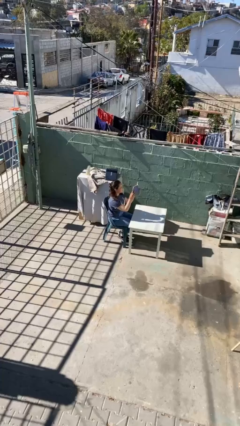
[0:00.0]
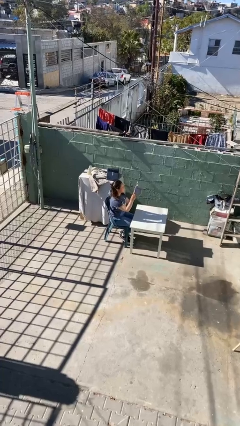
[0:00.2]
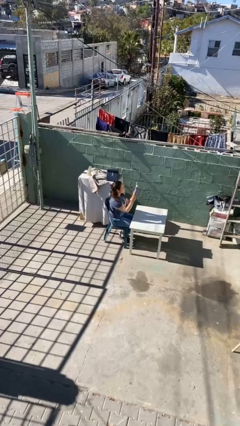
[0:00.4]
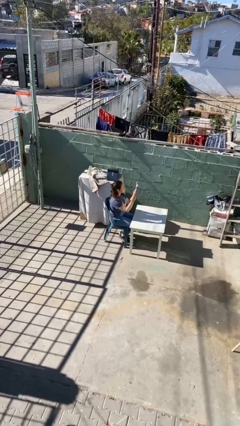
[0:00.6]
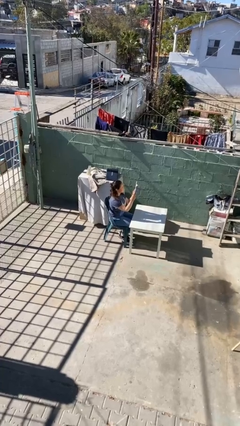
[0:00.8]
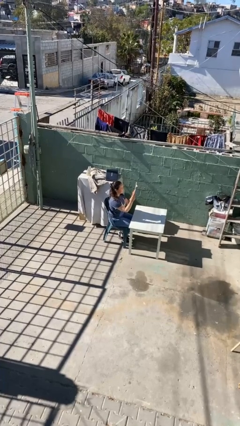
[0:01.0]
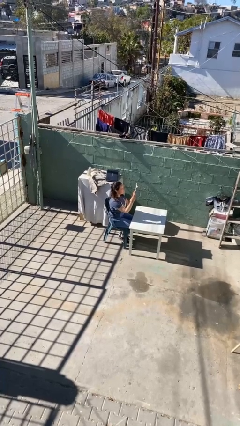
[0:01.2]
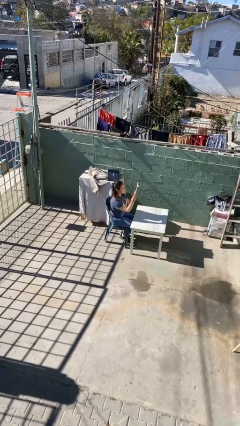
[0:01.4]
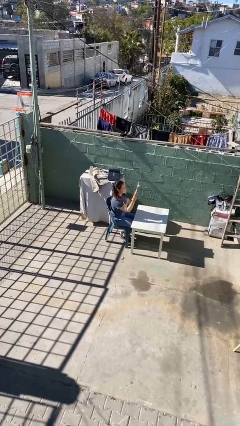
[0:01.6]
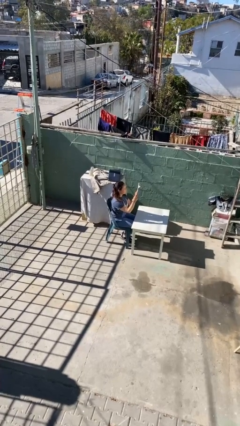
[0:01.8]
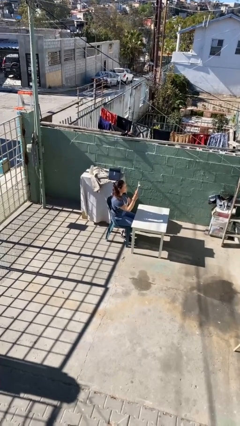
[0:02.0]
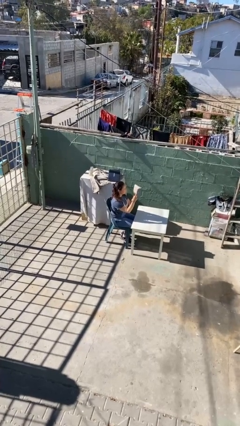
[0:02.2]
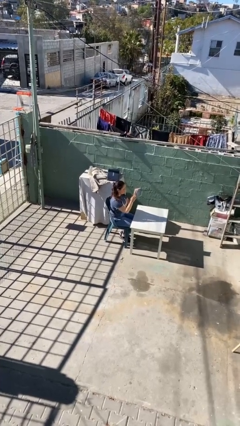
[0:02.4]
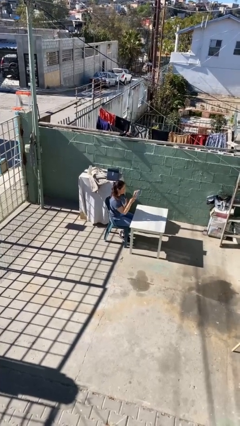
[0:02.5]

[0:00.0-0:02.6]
person reads document

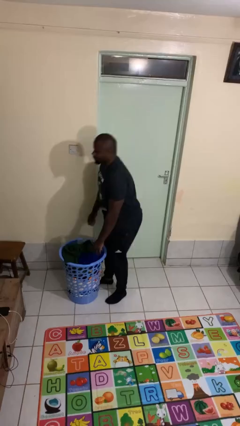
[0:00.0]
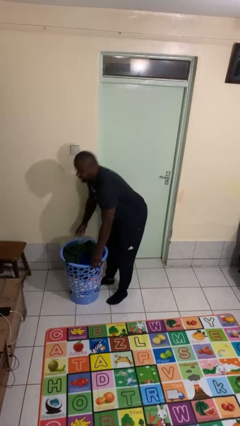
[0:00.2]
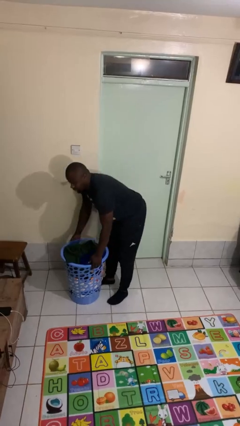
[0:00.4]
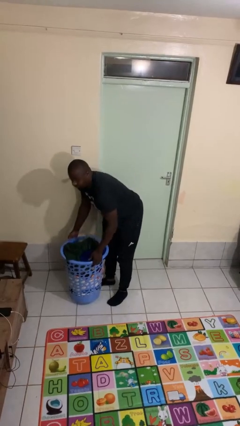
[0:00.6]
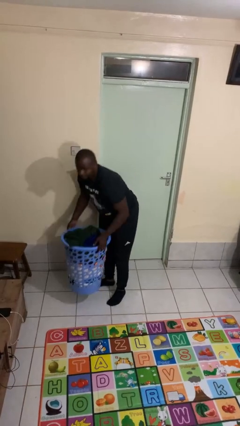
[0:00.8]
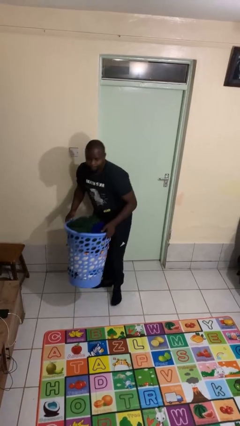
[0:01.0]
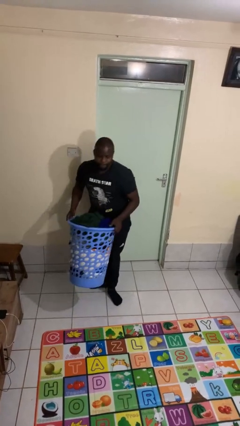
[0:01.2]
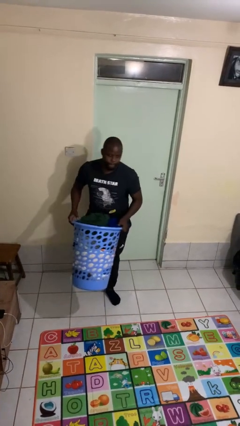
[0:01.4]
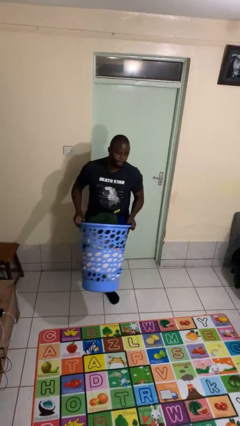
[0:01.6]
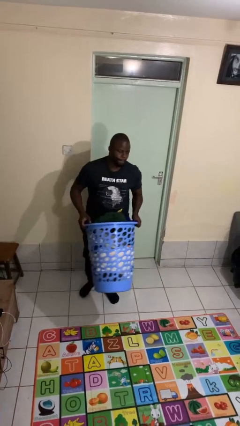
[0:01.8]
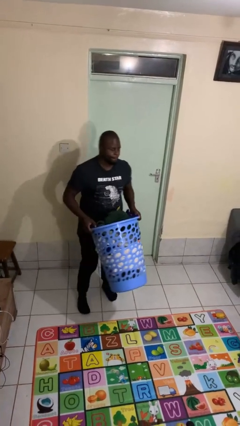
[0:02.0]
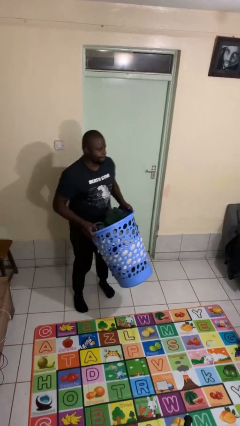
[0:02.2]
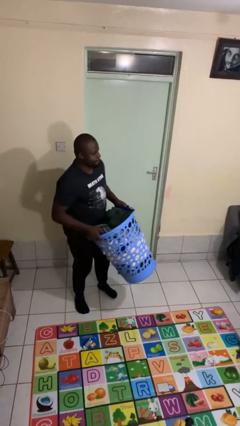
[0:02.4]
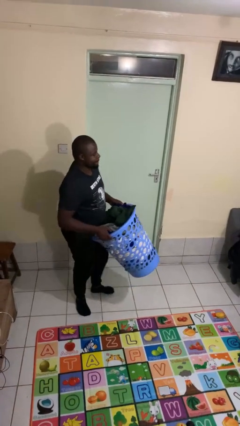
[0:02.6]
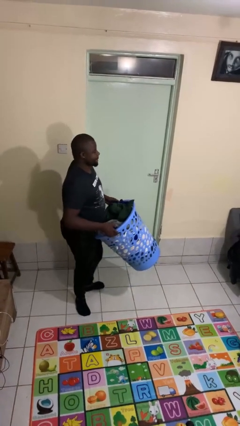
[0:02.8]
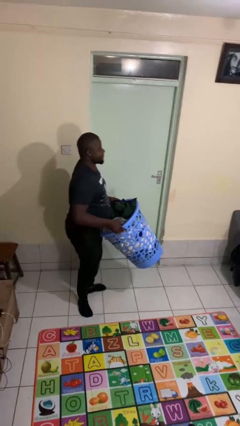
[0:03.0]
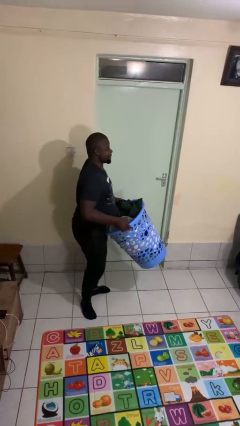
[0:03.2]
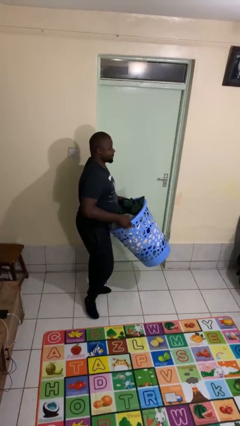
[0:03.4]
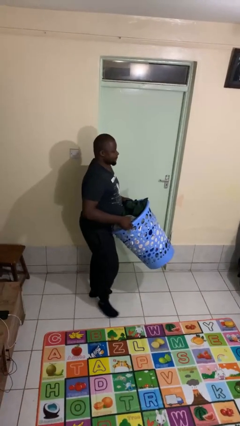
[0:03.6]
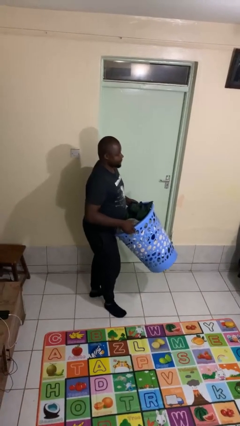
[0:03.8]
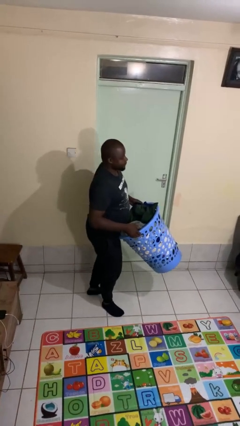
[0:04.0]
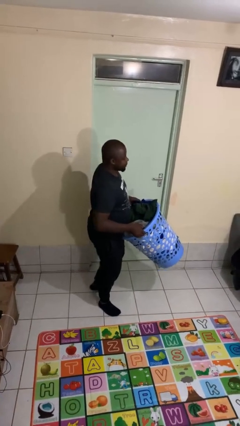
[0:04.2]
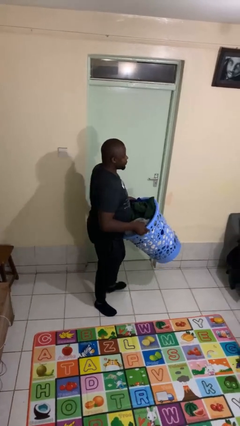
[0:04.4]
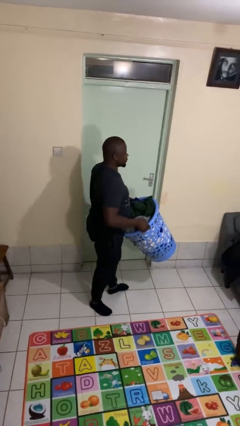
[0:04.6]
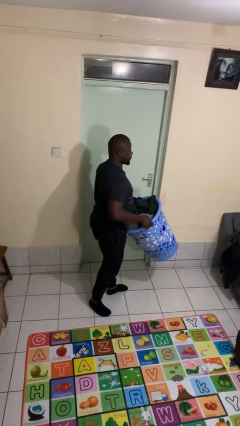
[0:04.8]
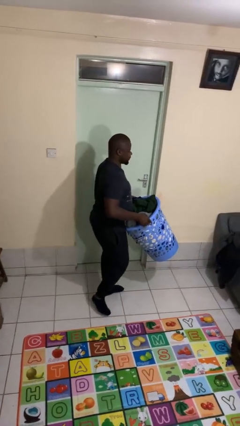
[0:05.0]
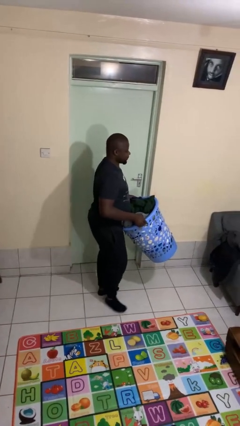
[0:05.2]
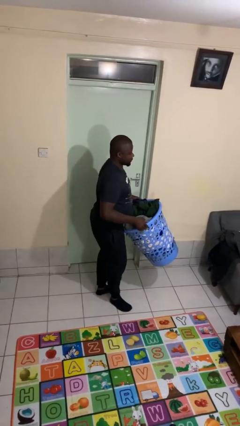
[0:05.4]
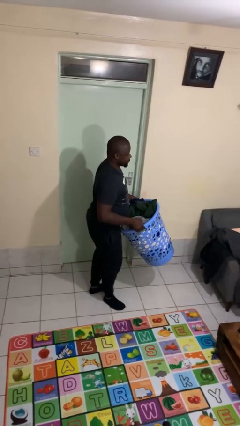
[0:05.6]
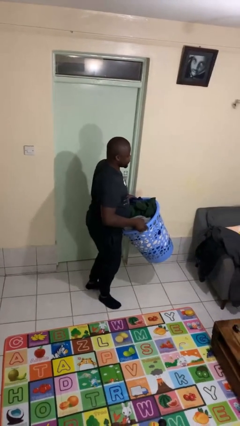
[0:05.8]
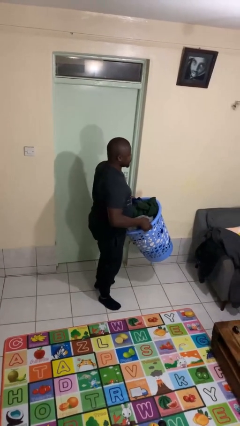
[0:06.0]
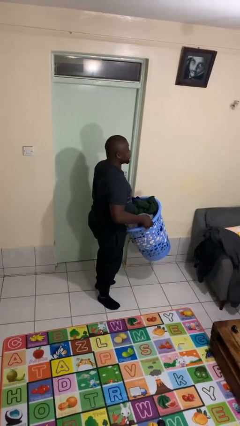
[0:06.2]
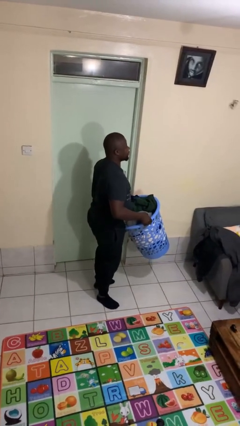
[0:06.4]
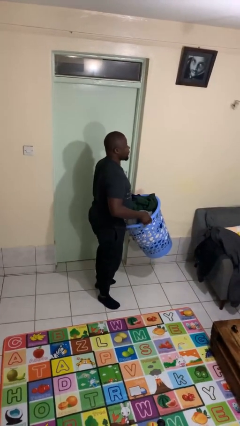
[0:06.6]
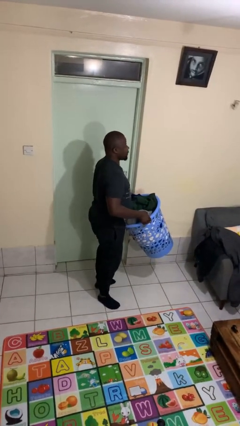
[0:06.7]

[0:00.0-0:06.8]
person carries laundry basket

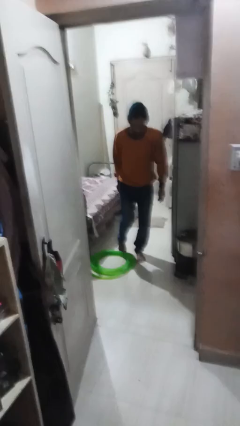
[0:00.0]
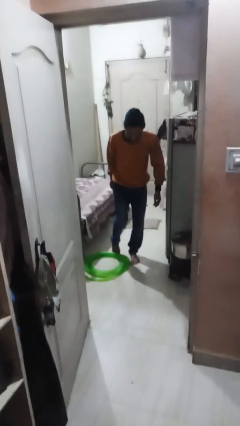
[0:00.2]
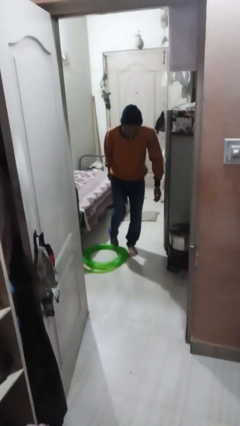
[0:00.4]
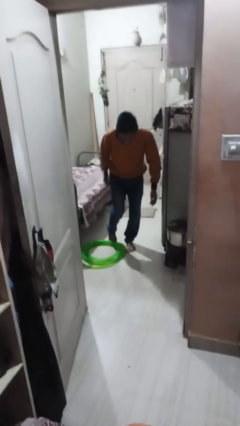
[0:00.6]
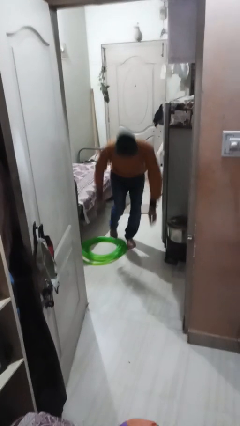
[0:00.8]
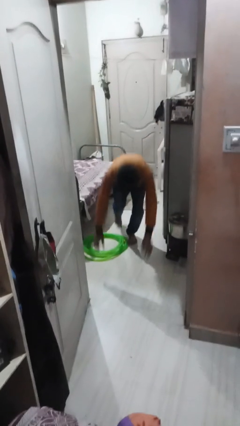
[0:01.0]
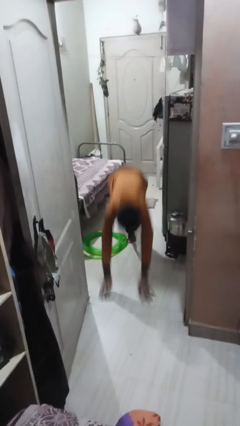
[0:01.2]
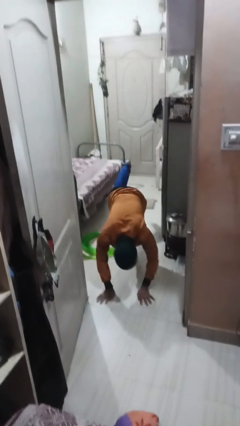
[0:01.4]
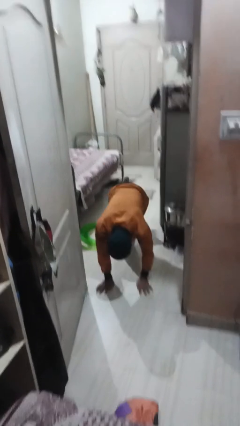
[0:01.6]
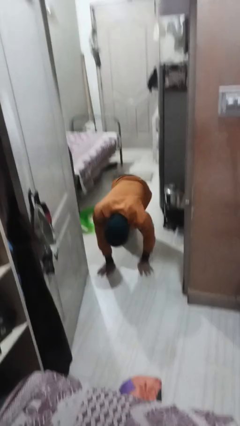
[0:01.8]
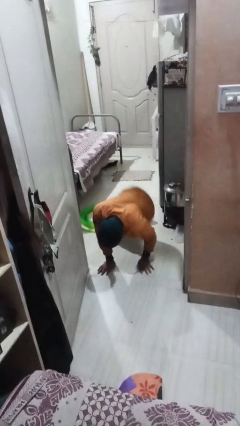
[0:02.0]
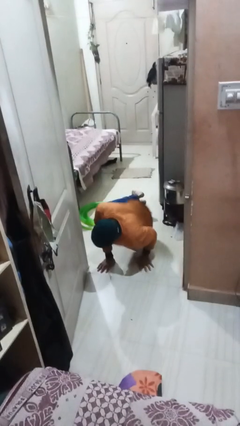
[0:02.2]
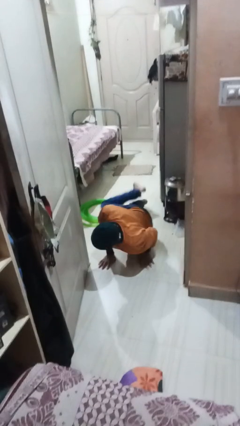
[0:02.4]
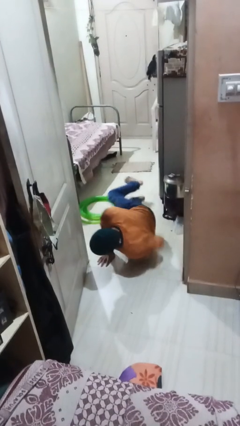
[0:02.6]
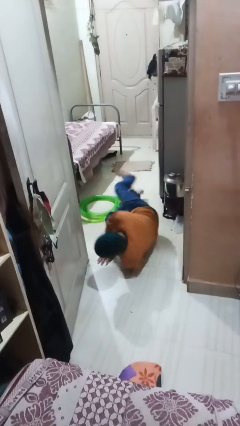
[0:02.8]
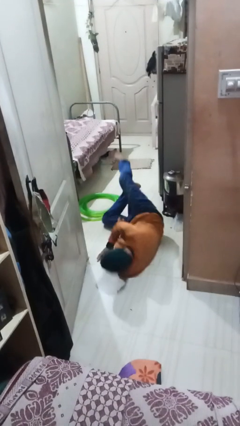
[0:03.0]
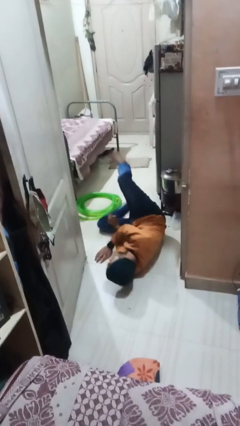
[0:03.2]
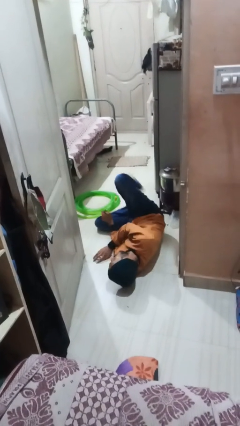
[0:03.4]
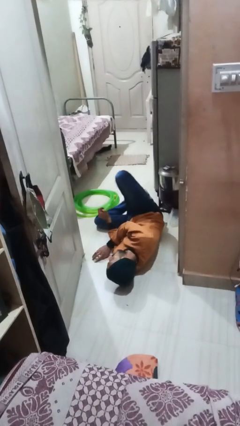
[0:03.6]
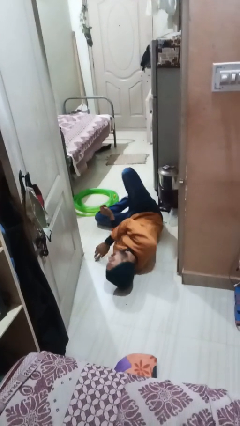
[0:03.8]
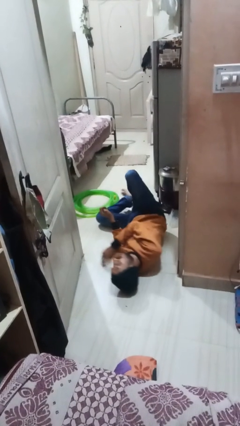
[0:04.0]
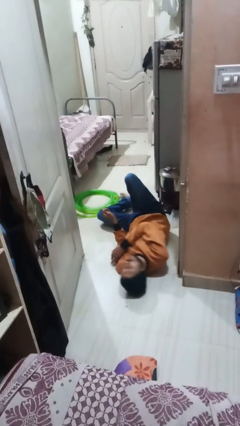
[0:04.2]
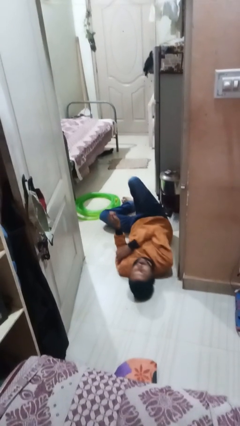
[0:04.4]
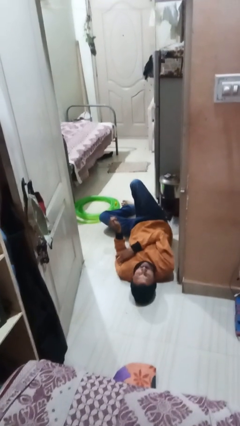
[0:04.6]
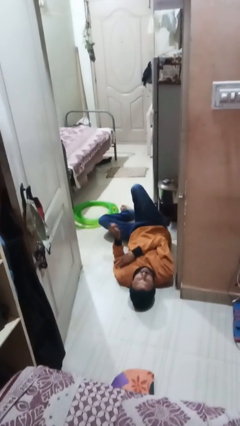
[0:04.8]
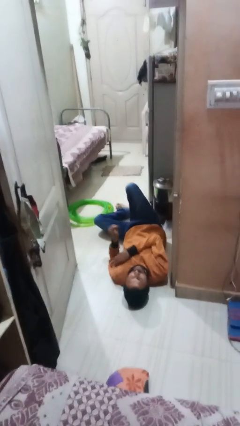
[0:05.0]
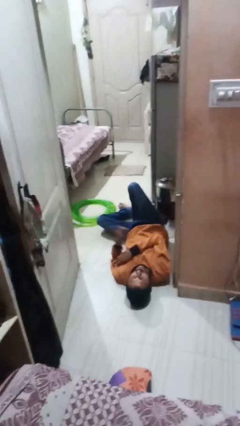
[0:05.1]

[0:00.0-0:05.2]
person trips on object on floor

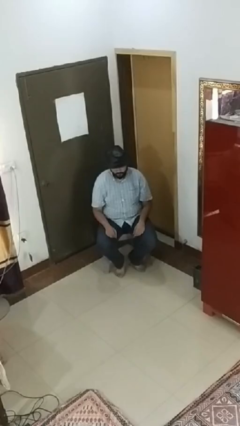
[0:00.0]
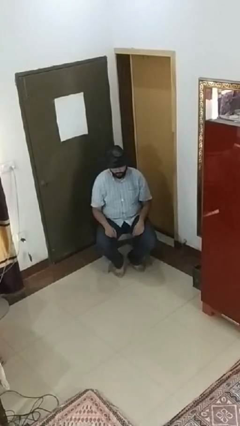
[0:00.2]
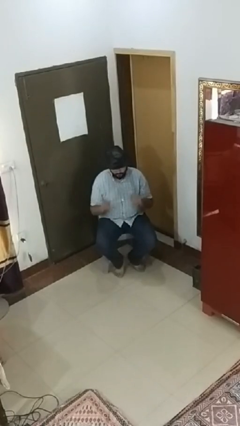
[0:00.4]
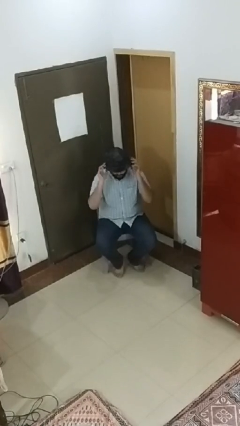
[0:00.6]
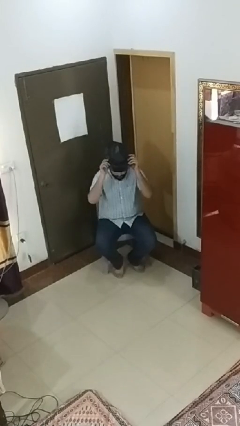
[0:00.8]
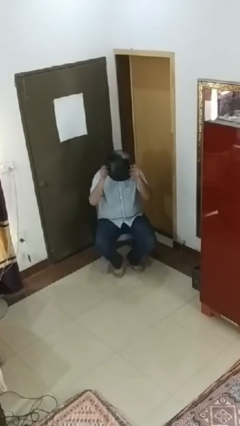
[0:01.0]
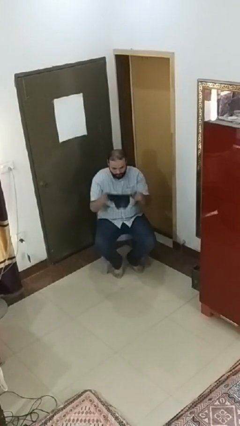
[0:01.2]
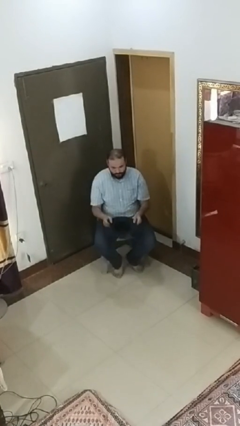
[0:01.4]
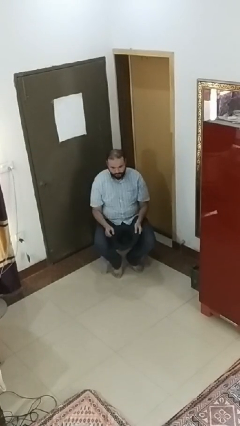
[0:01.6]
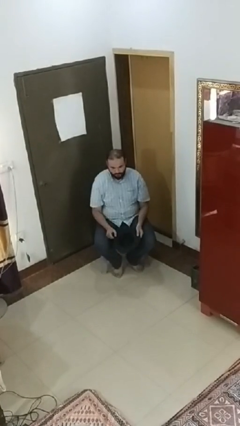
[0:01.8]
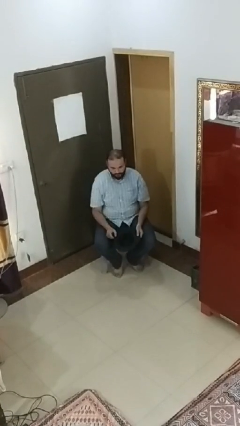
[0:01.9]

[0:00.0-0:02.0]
person takes off hat

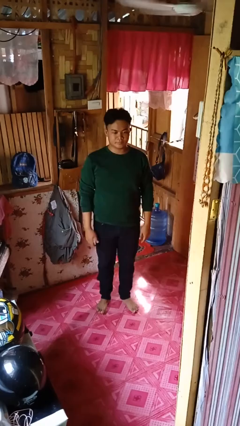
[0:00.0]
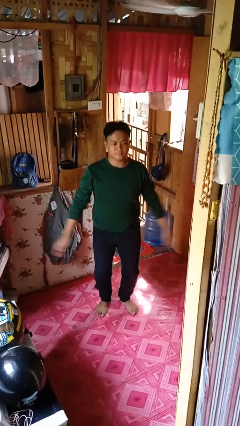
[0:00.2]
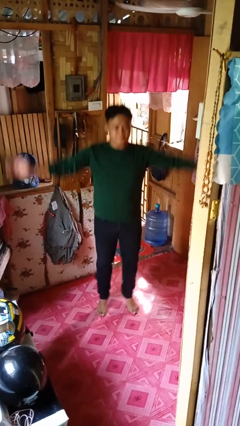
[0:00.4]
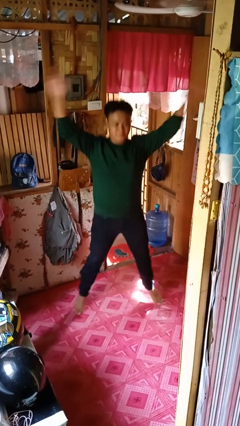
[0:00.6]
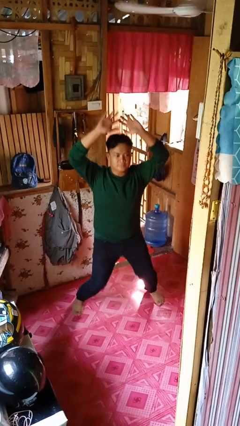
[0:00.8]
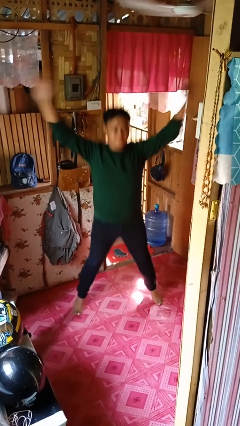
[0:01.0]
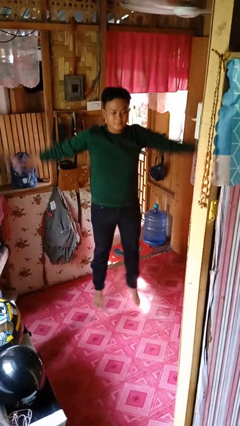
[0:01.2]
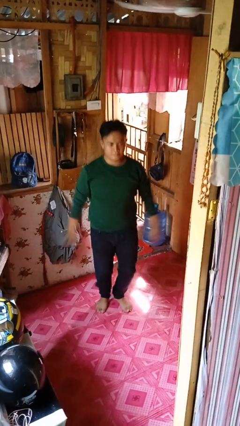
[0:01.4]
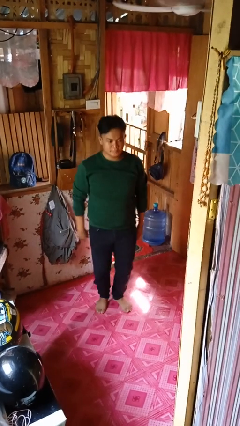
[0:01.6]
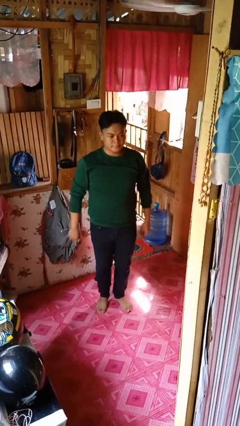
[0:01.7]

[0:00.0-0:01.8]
person exercises with jumping jacks
